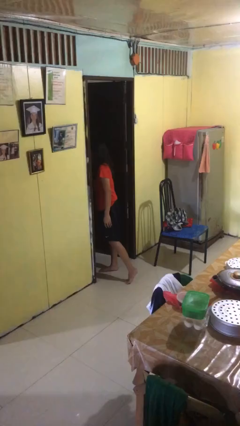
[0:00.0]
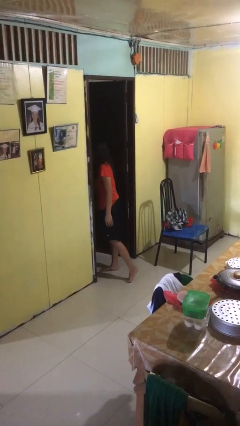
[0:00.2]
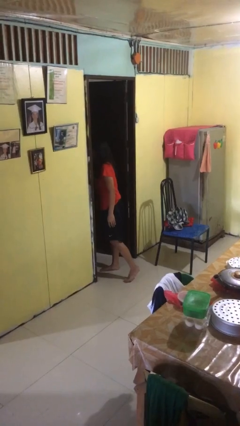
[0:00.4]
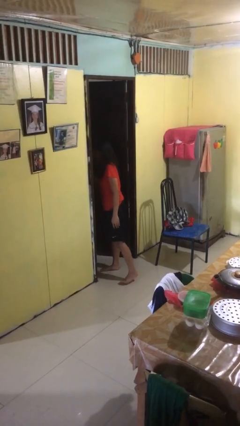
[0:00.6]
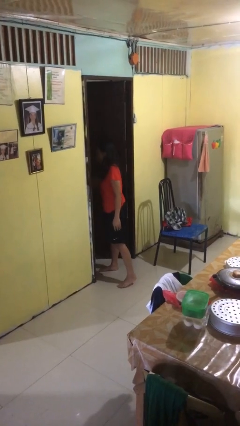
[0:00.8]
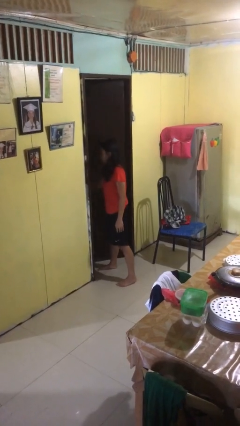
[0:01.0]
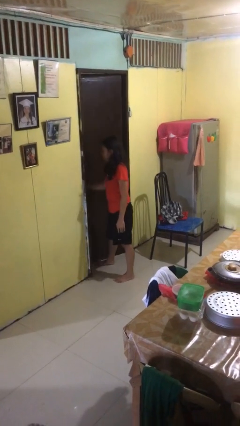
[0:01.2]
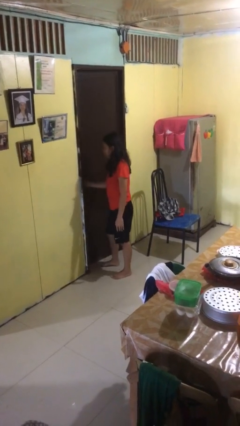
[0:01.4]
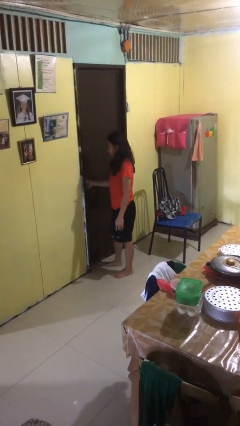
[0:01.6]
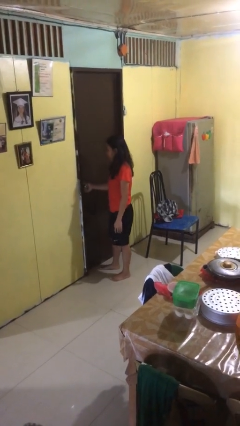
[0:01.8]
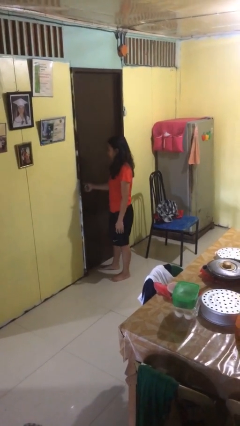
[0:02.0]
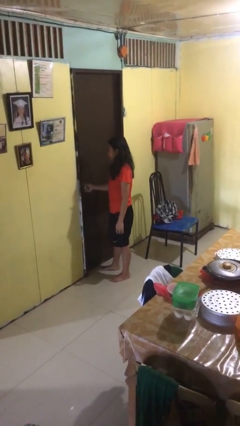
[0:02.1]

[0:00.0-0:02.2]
person closes facility door

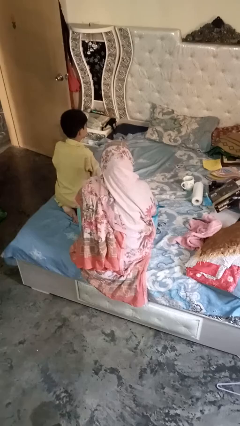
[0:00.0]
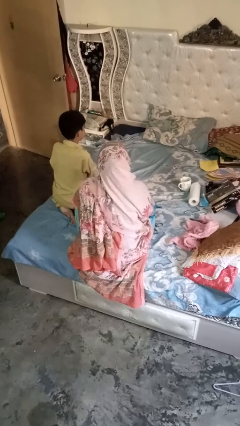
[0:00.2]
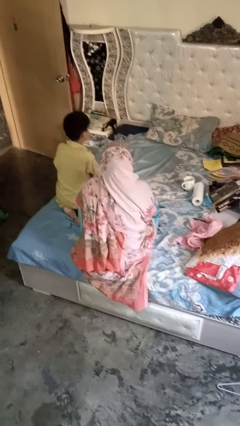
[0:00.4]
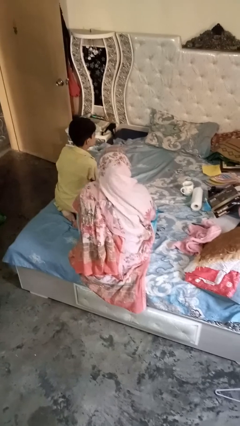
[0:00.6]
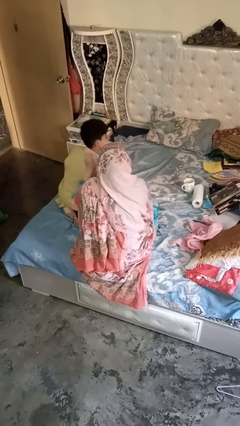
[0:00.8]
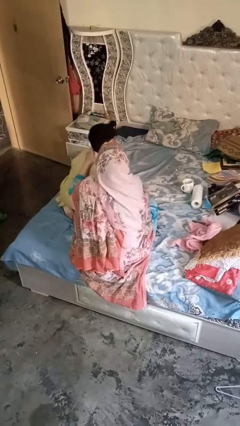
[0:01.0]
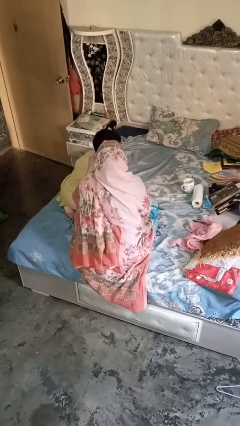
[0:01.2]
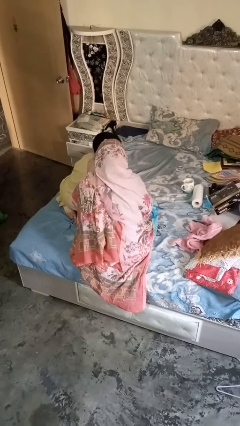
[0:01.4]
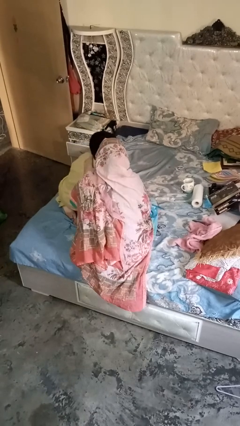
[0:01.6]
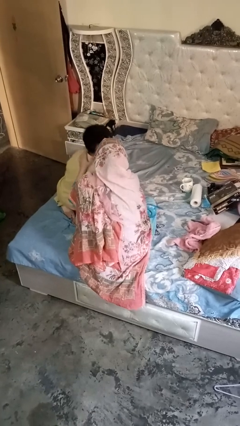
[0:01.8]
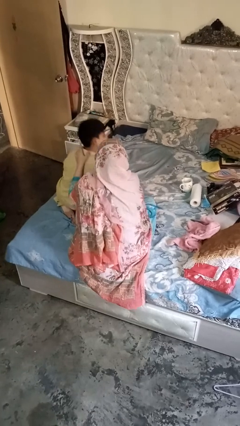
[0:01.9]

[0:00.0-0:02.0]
person gestures blow kiss

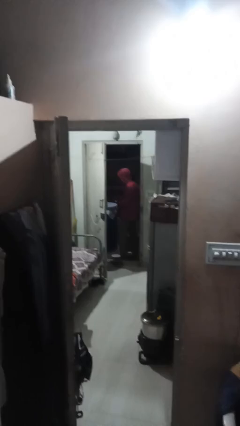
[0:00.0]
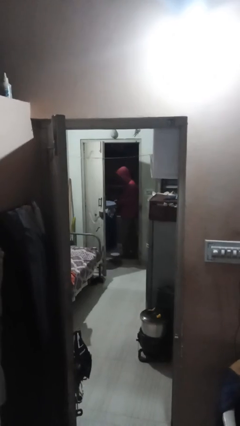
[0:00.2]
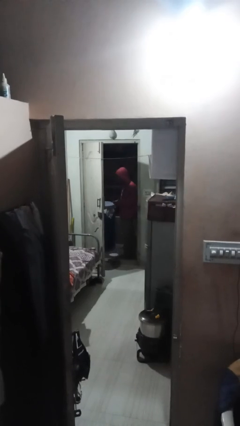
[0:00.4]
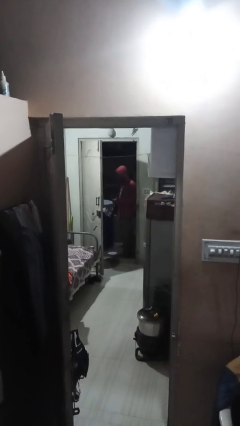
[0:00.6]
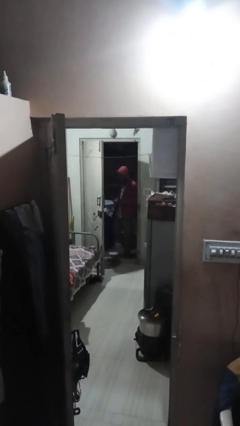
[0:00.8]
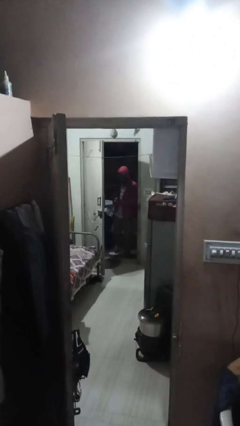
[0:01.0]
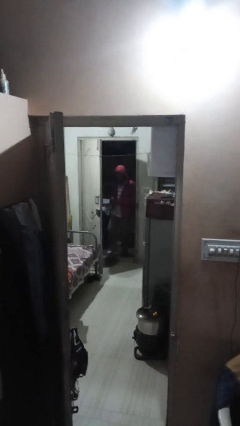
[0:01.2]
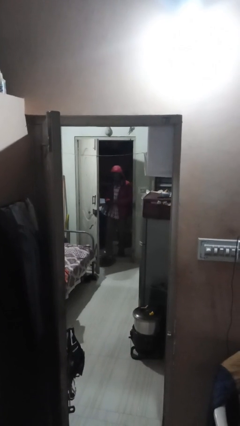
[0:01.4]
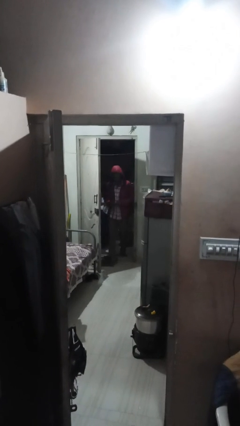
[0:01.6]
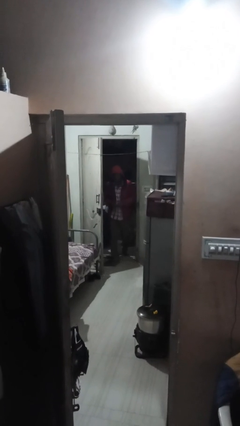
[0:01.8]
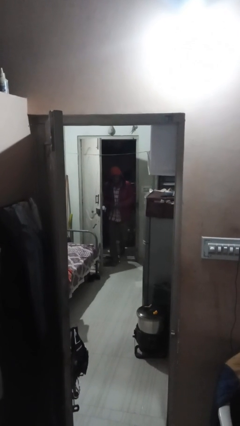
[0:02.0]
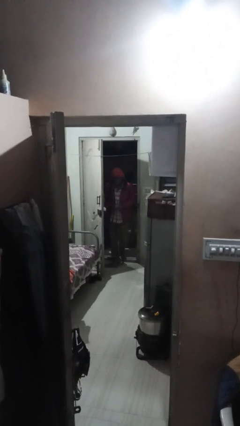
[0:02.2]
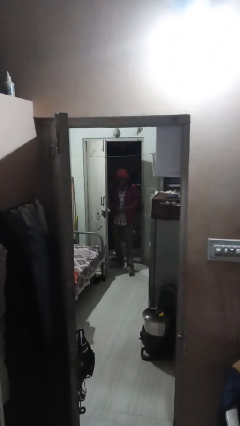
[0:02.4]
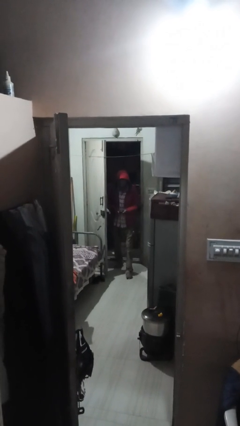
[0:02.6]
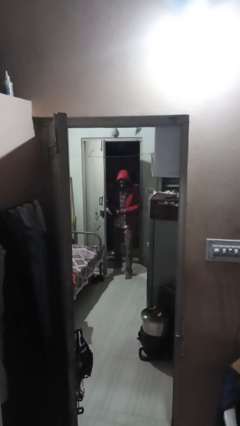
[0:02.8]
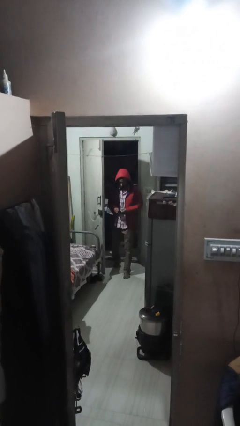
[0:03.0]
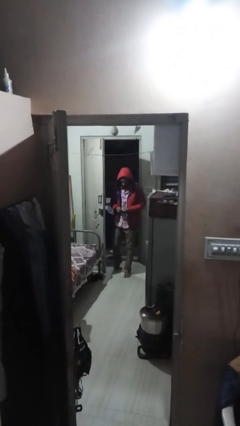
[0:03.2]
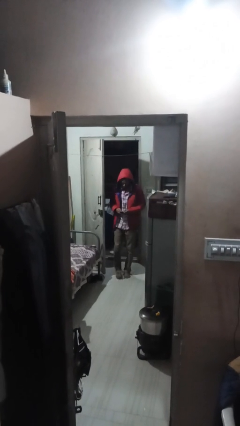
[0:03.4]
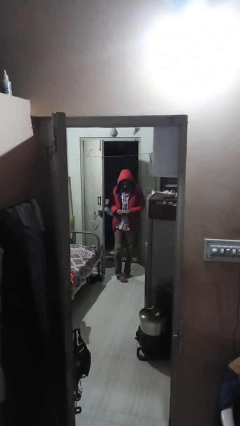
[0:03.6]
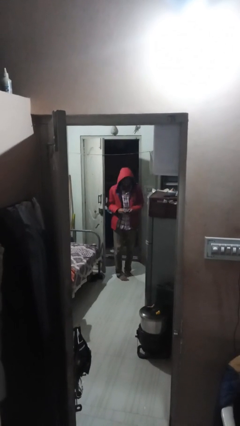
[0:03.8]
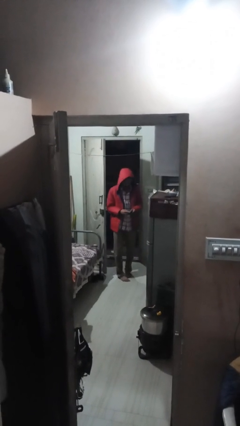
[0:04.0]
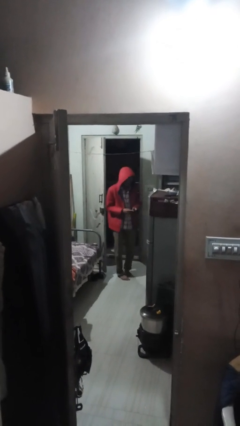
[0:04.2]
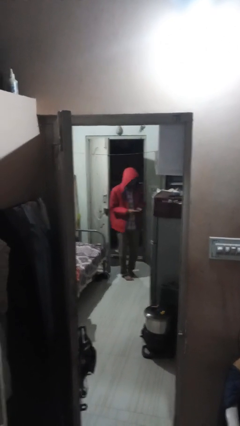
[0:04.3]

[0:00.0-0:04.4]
person enters scene through structure

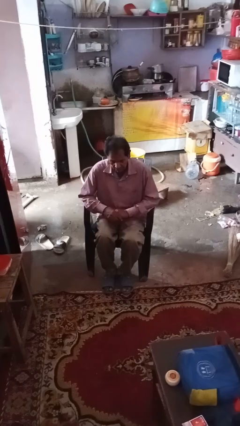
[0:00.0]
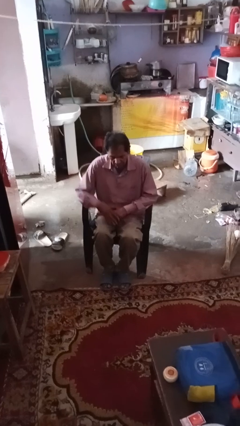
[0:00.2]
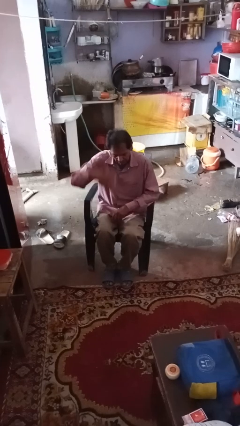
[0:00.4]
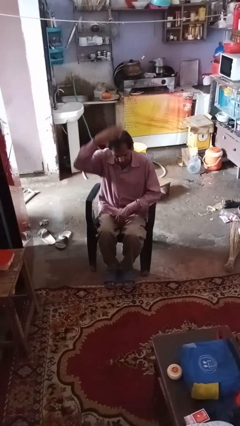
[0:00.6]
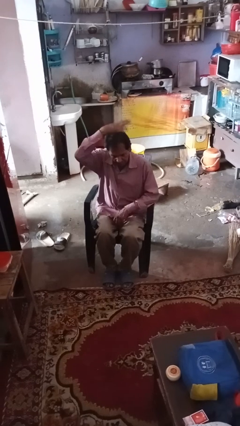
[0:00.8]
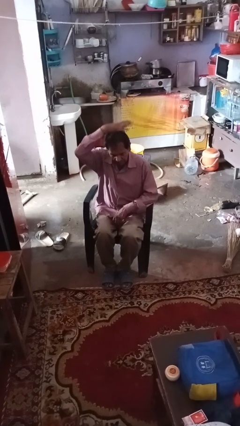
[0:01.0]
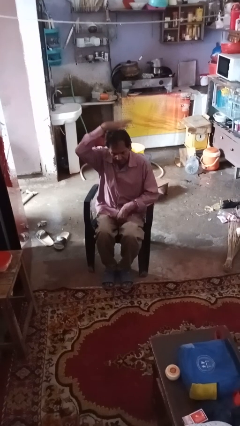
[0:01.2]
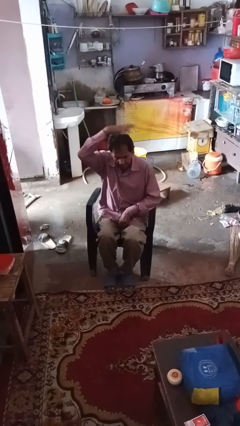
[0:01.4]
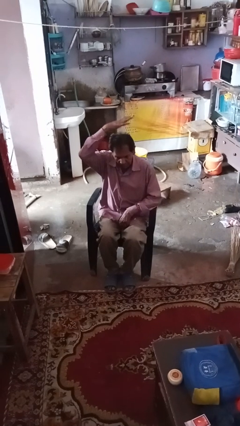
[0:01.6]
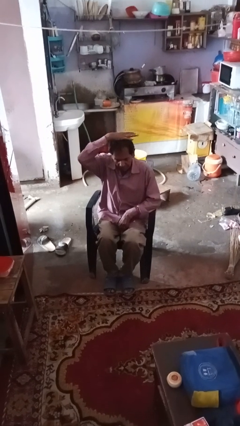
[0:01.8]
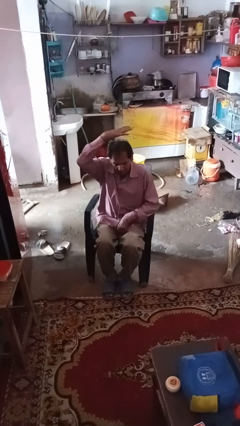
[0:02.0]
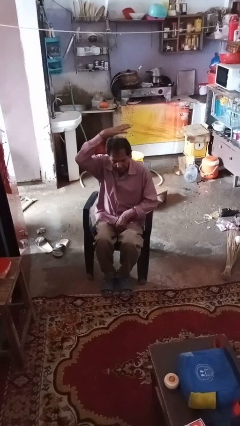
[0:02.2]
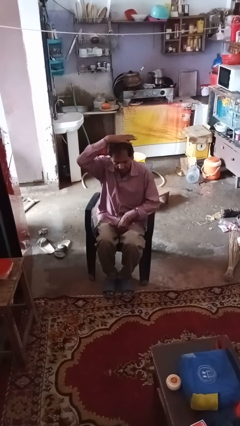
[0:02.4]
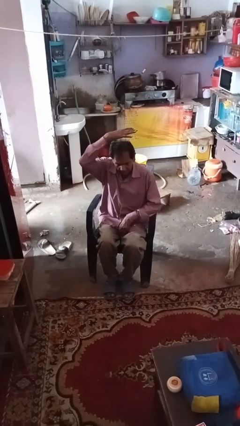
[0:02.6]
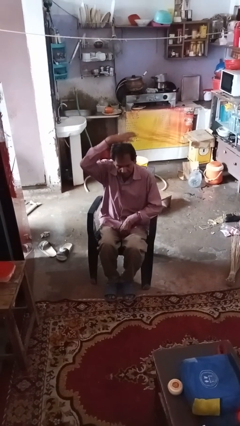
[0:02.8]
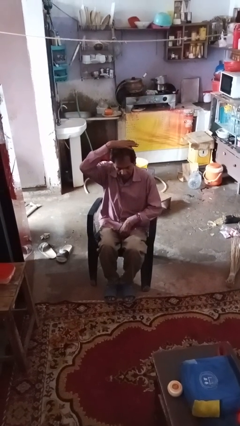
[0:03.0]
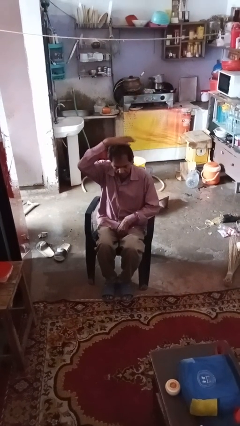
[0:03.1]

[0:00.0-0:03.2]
person pats head

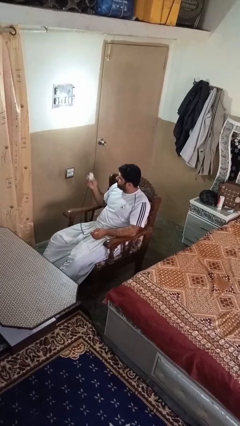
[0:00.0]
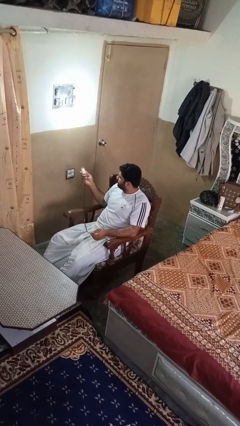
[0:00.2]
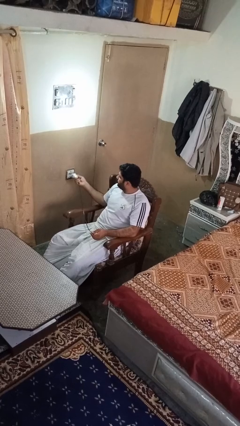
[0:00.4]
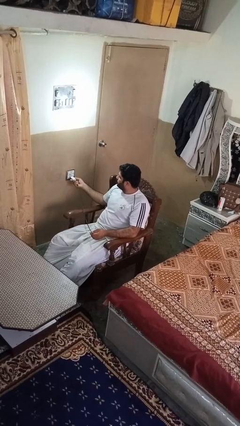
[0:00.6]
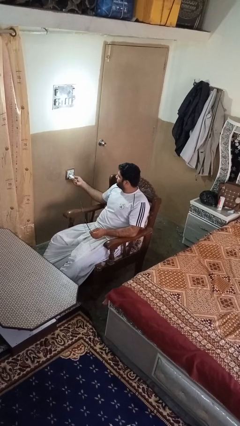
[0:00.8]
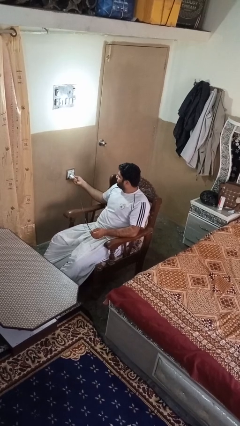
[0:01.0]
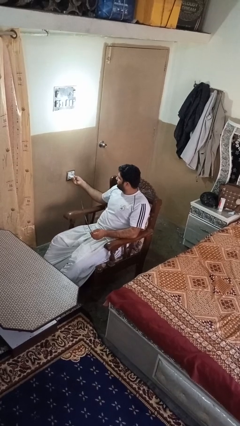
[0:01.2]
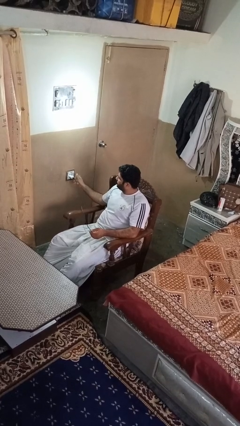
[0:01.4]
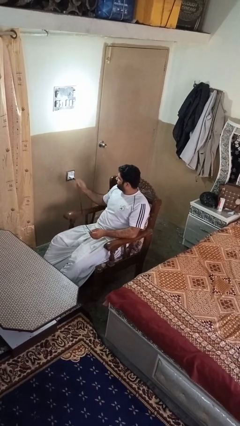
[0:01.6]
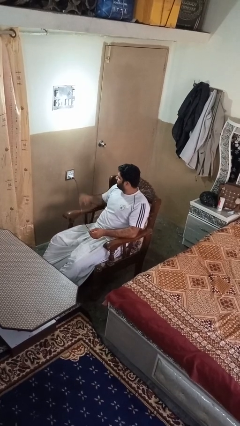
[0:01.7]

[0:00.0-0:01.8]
person plugs into electrical socket

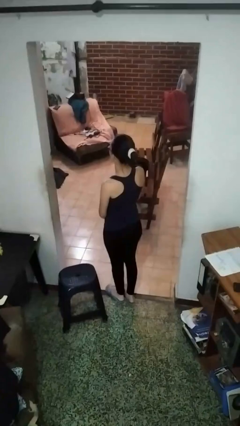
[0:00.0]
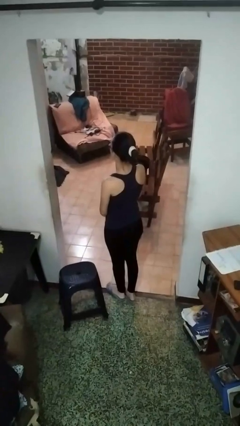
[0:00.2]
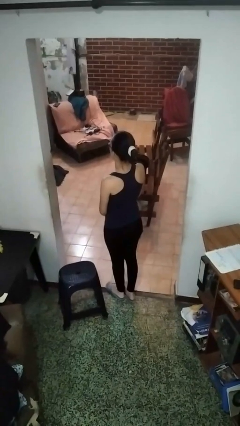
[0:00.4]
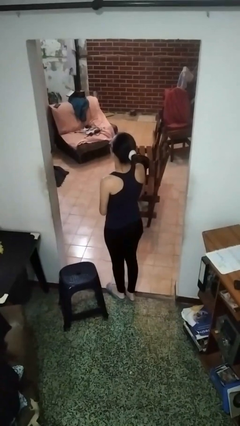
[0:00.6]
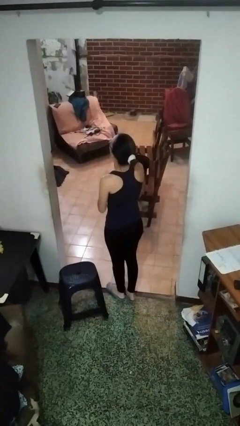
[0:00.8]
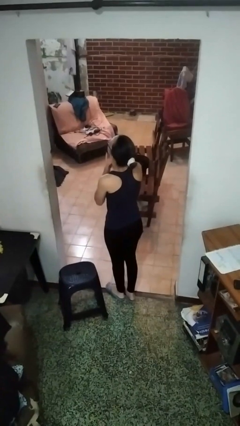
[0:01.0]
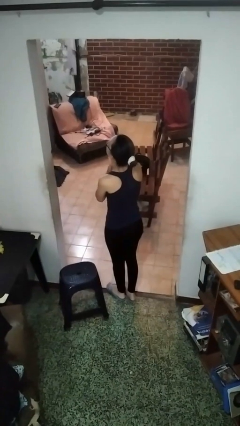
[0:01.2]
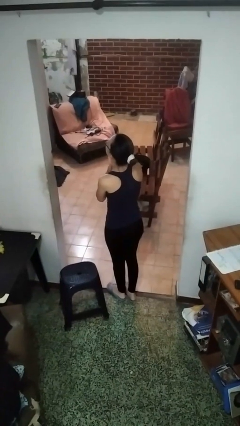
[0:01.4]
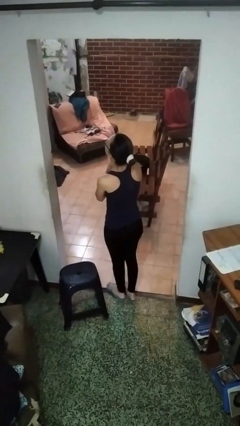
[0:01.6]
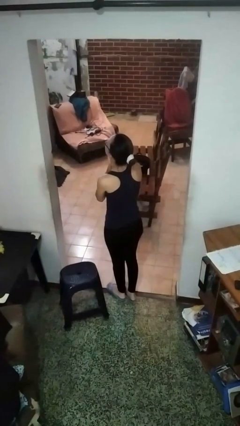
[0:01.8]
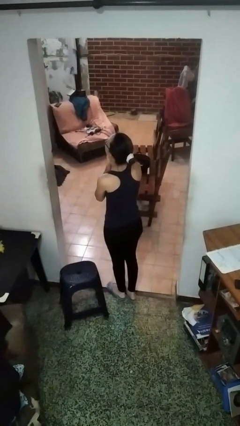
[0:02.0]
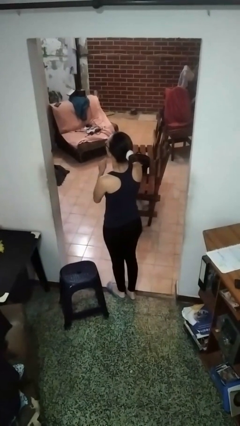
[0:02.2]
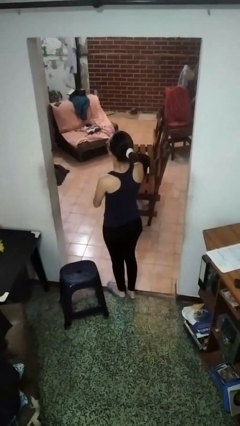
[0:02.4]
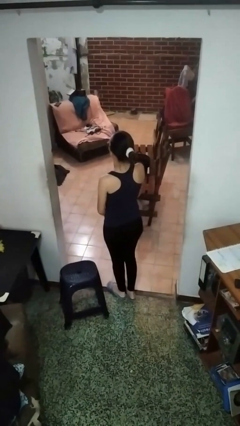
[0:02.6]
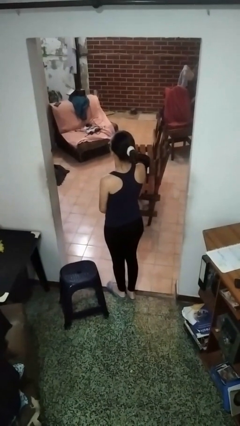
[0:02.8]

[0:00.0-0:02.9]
person strokes chin

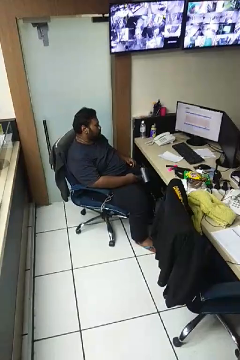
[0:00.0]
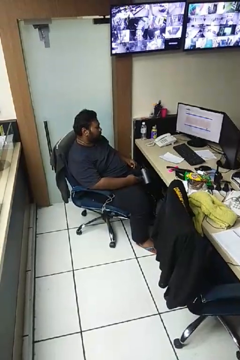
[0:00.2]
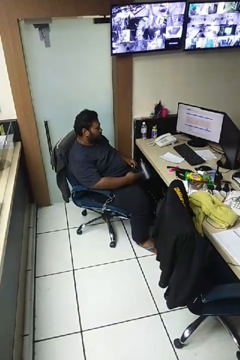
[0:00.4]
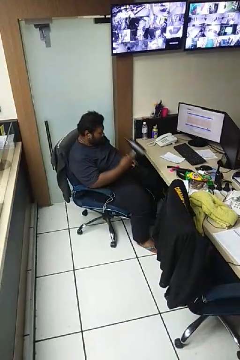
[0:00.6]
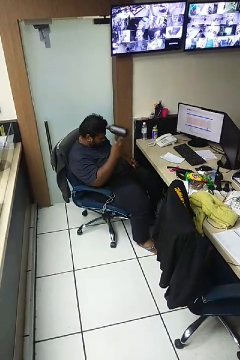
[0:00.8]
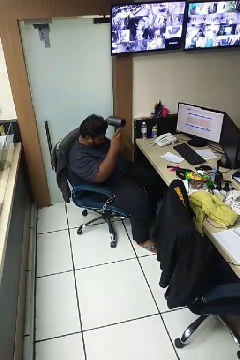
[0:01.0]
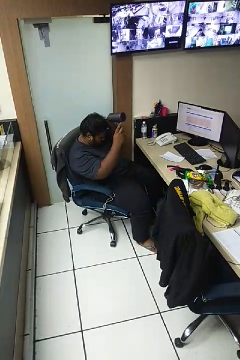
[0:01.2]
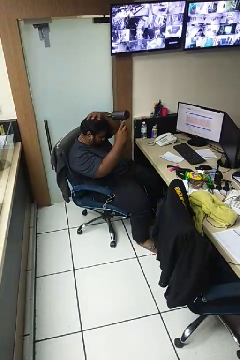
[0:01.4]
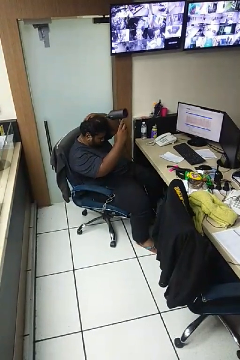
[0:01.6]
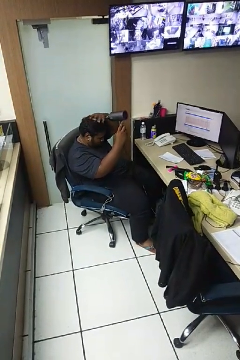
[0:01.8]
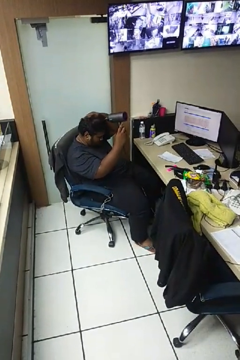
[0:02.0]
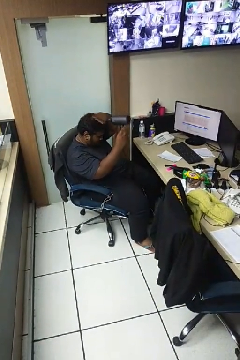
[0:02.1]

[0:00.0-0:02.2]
person dries hair with hairdryer
